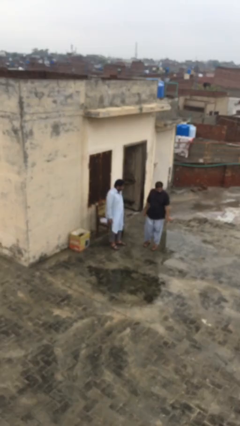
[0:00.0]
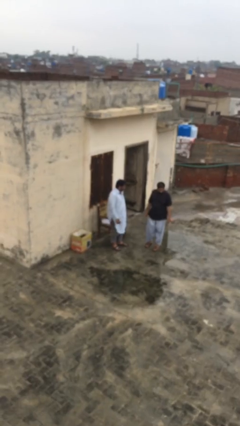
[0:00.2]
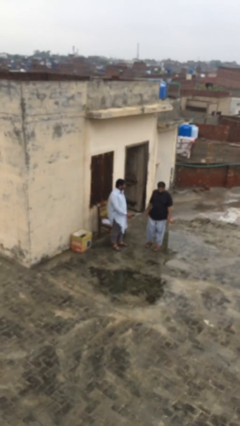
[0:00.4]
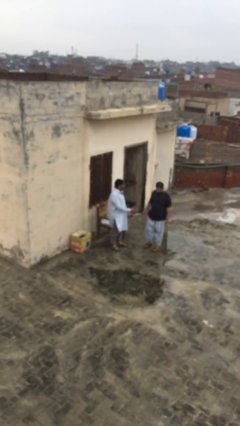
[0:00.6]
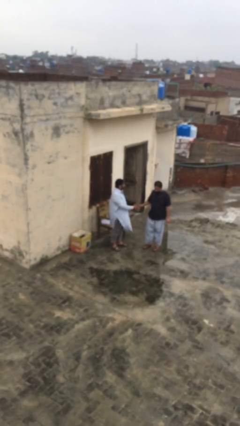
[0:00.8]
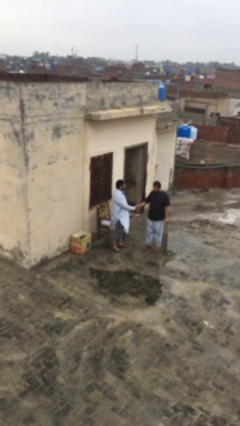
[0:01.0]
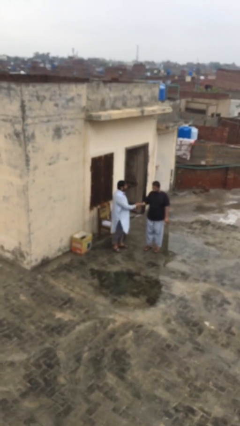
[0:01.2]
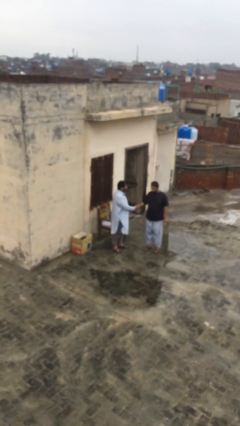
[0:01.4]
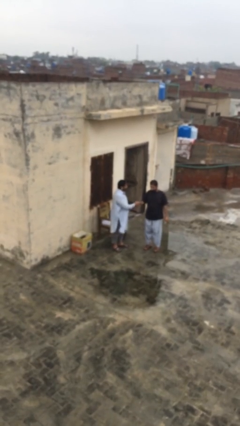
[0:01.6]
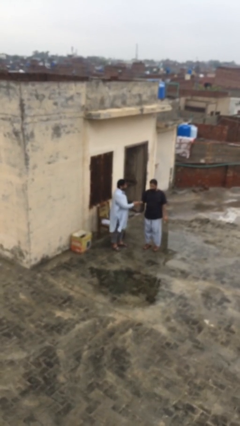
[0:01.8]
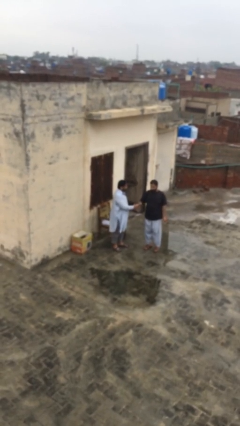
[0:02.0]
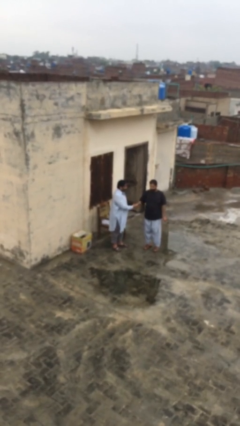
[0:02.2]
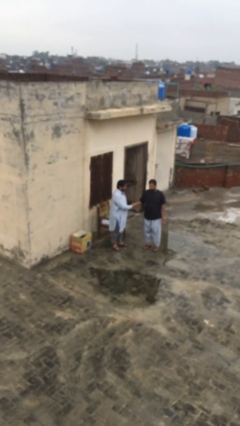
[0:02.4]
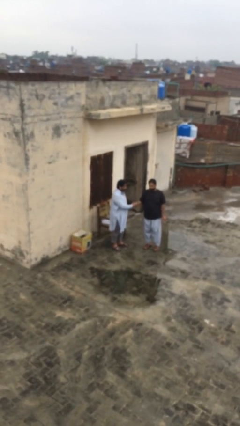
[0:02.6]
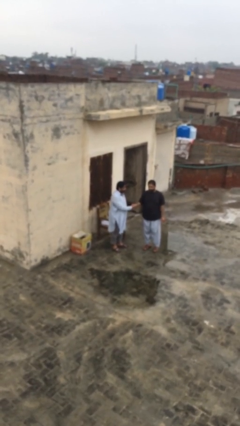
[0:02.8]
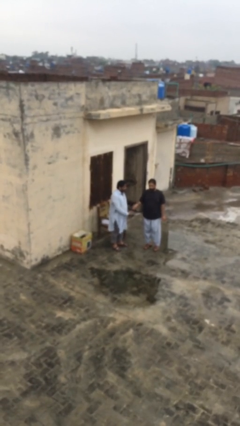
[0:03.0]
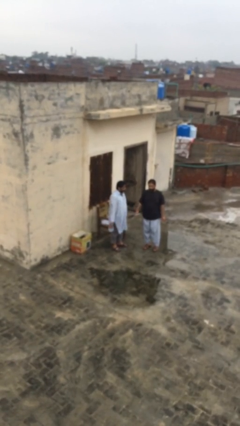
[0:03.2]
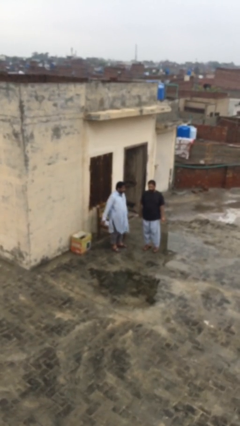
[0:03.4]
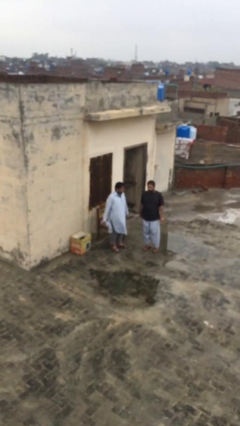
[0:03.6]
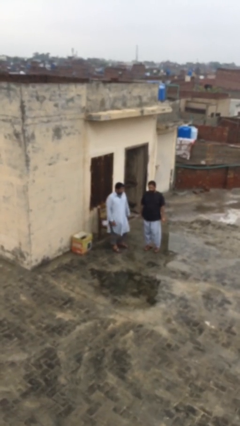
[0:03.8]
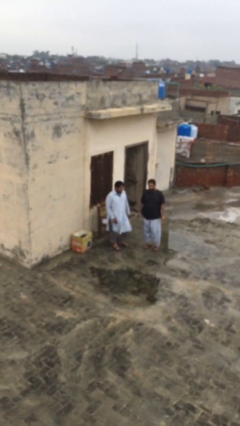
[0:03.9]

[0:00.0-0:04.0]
person shakes hand

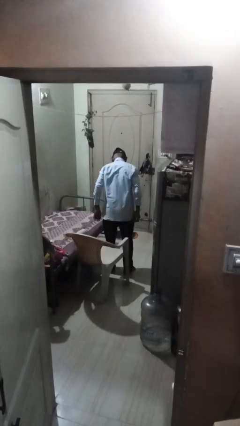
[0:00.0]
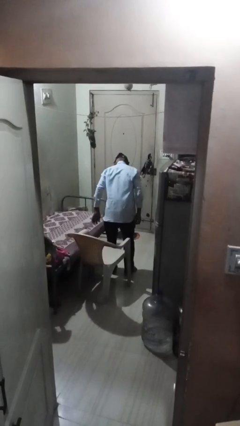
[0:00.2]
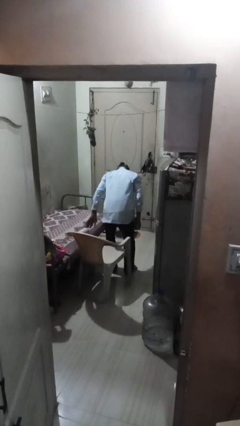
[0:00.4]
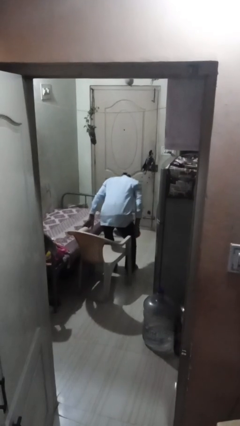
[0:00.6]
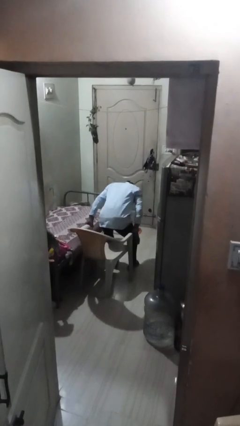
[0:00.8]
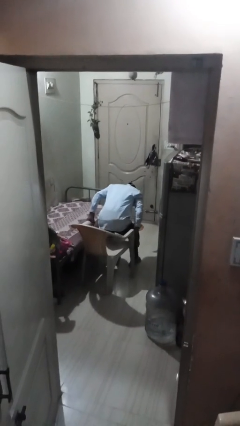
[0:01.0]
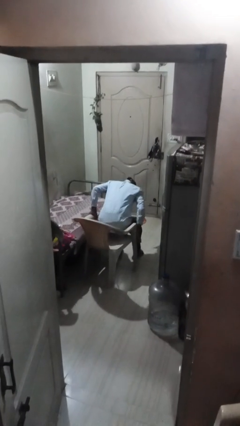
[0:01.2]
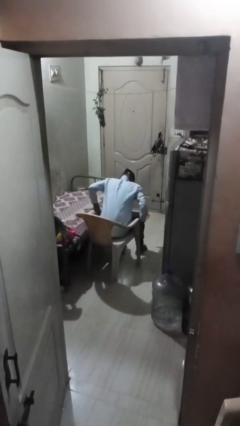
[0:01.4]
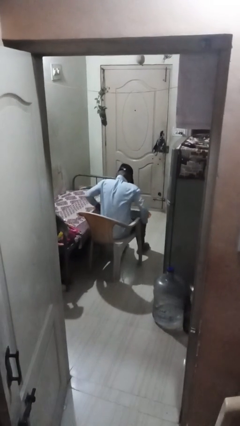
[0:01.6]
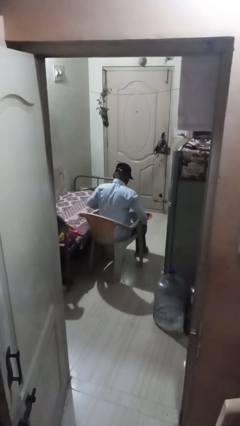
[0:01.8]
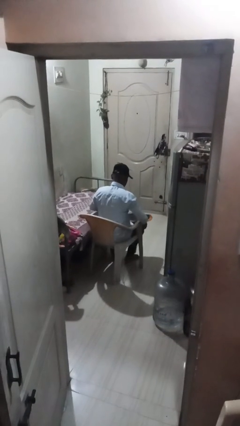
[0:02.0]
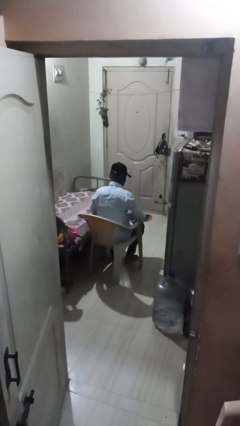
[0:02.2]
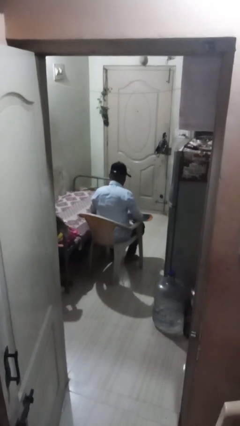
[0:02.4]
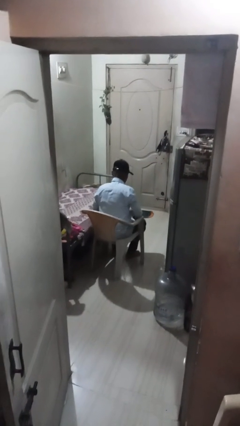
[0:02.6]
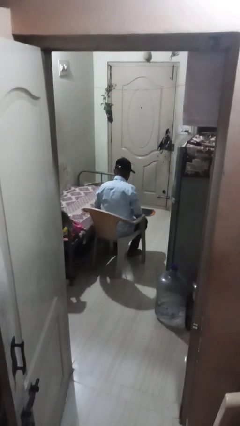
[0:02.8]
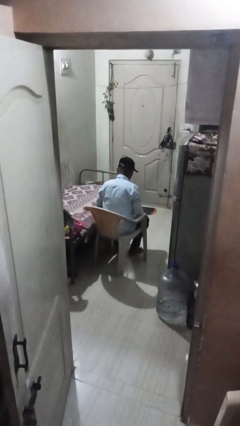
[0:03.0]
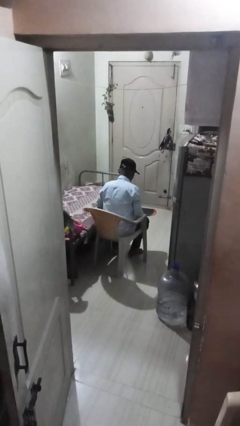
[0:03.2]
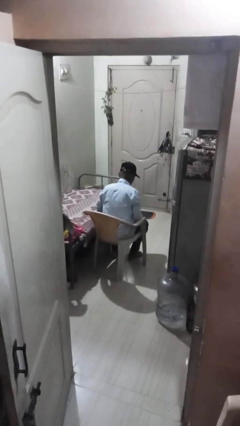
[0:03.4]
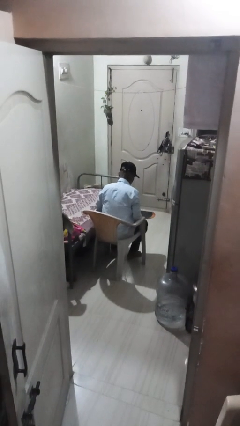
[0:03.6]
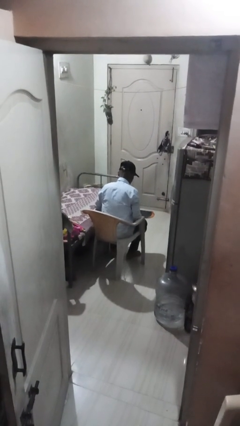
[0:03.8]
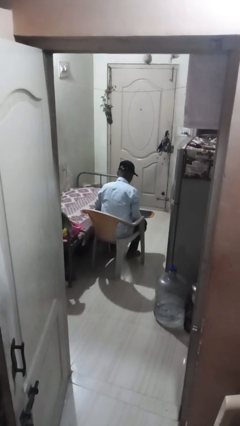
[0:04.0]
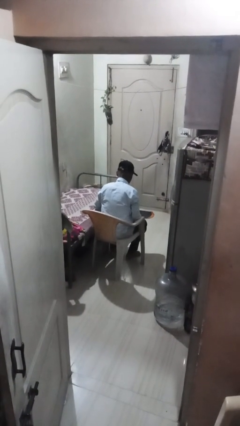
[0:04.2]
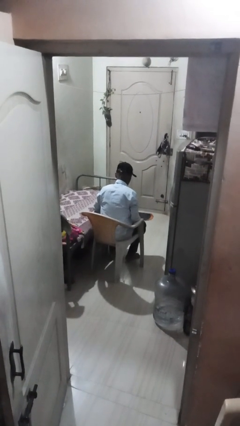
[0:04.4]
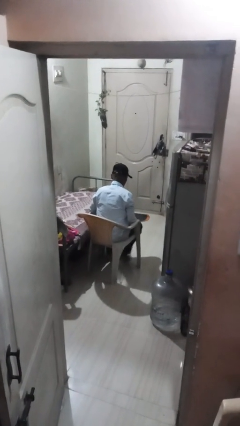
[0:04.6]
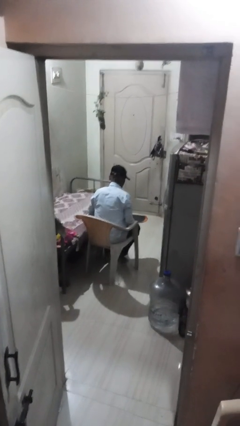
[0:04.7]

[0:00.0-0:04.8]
person sits down

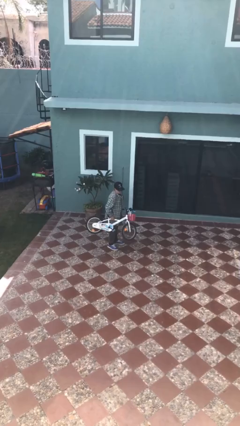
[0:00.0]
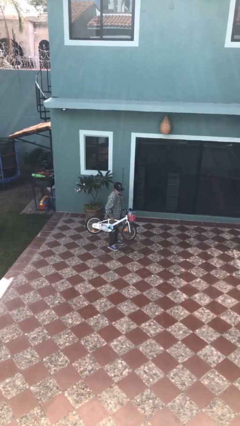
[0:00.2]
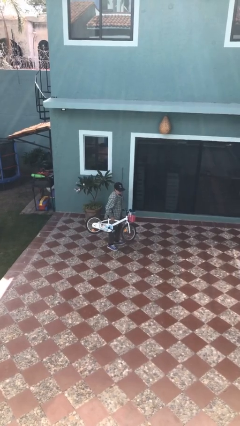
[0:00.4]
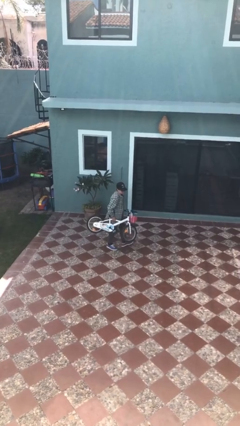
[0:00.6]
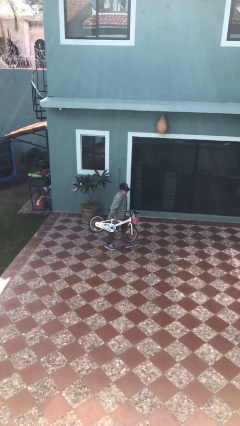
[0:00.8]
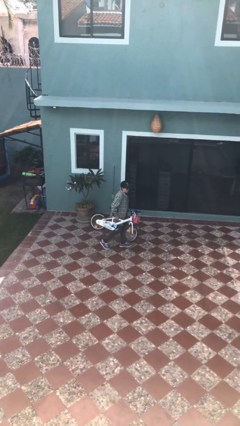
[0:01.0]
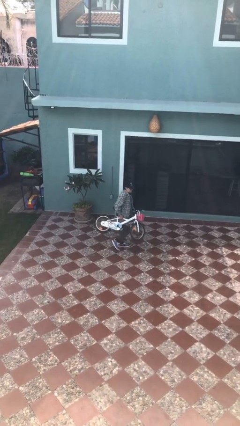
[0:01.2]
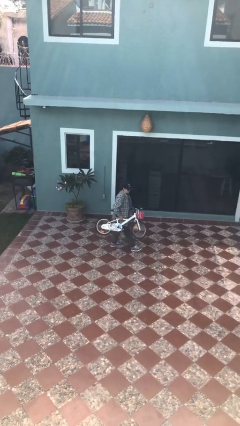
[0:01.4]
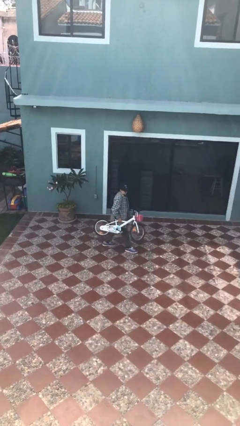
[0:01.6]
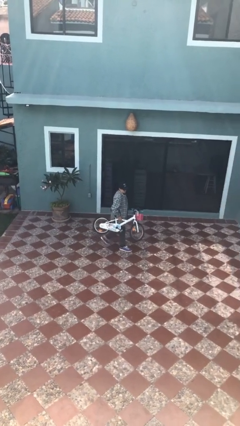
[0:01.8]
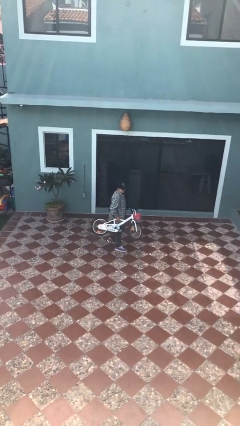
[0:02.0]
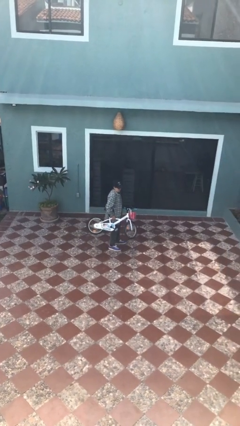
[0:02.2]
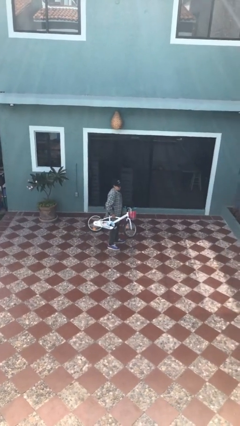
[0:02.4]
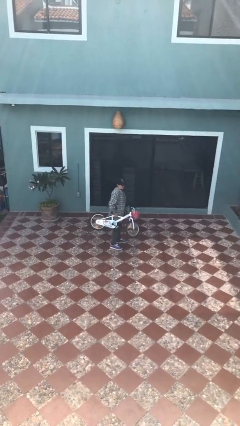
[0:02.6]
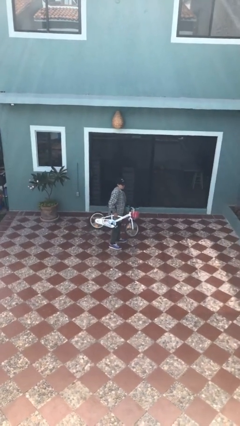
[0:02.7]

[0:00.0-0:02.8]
person carries bicycle

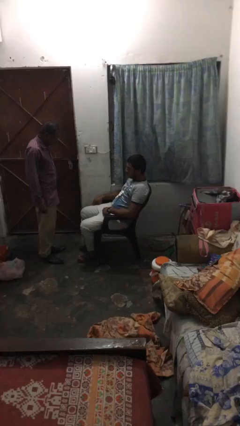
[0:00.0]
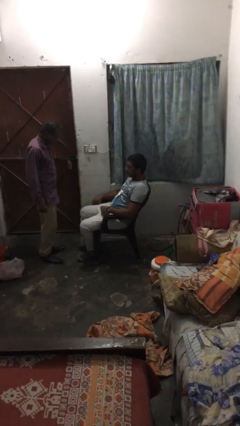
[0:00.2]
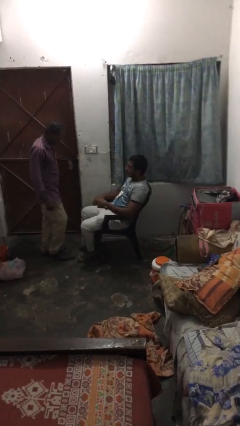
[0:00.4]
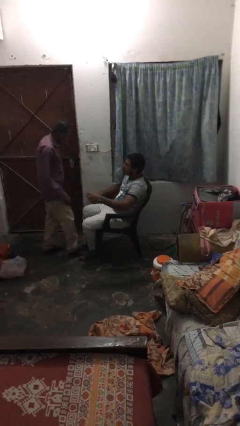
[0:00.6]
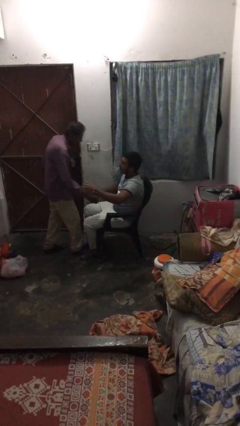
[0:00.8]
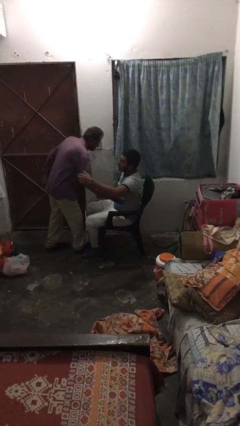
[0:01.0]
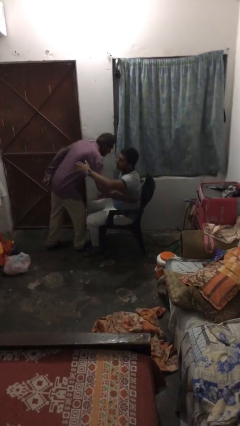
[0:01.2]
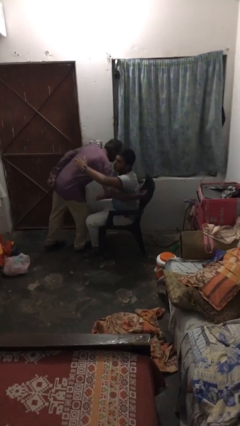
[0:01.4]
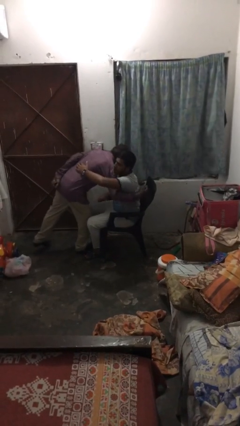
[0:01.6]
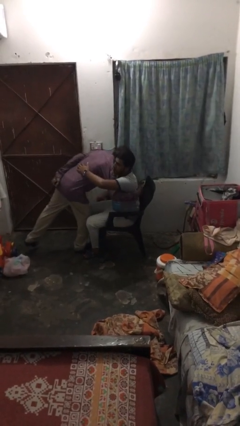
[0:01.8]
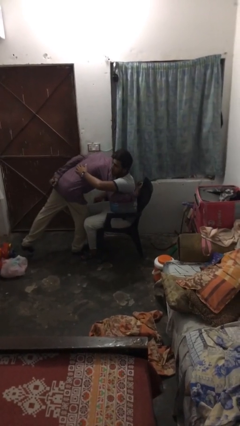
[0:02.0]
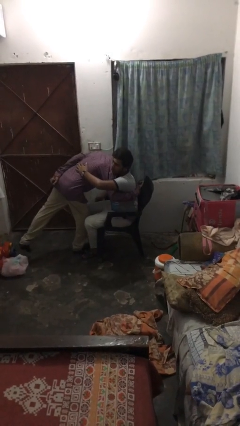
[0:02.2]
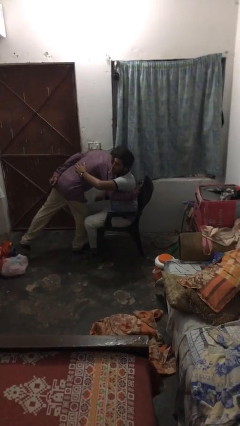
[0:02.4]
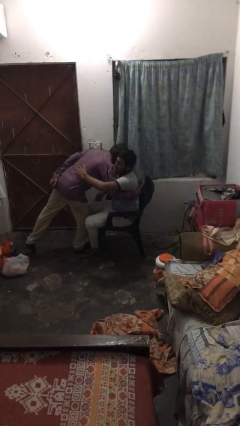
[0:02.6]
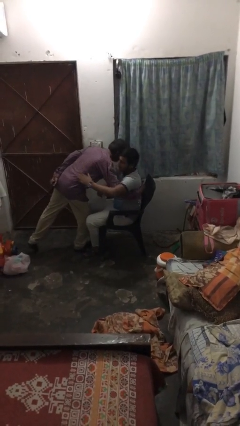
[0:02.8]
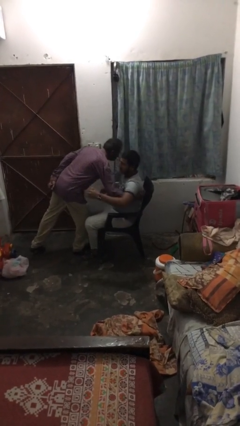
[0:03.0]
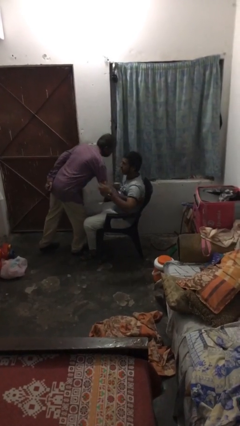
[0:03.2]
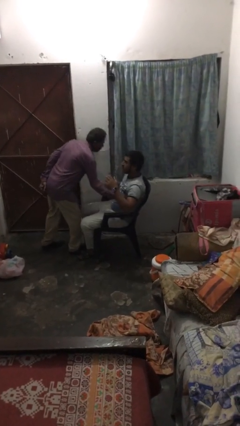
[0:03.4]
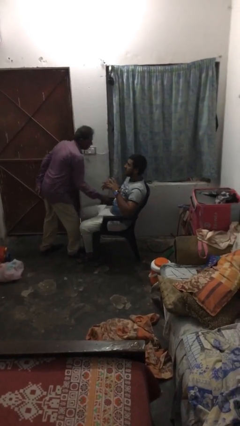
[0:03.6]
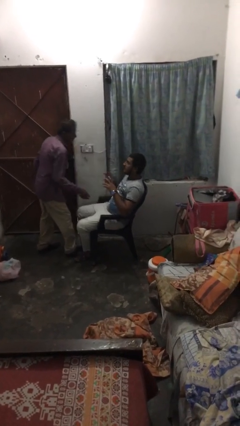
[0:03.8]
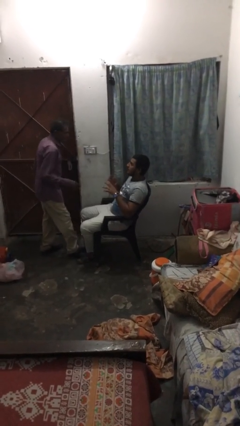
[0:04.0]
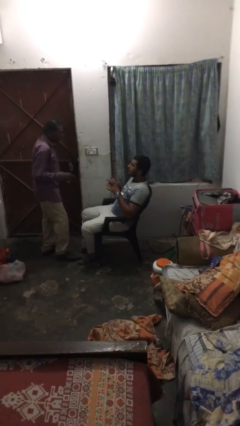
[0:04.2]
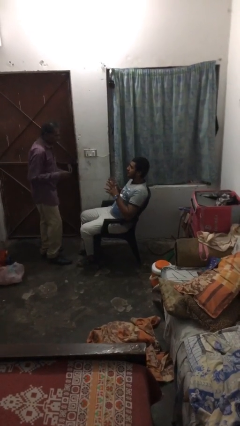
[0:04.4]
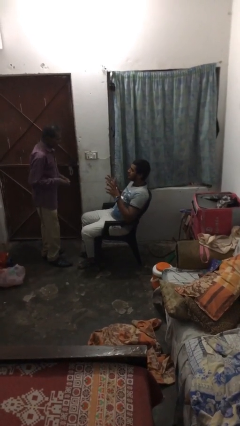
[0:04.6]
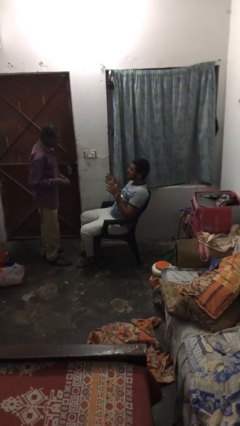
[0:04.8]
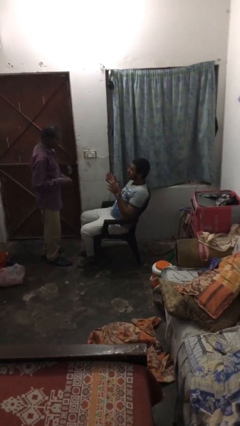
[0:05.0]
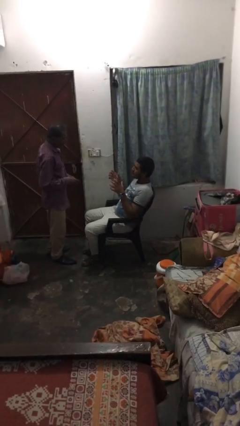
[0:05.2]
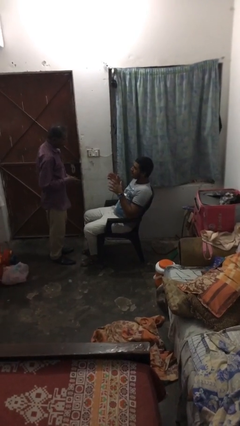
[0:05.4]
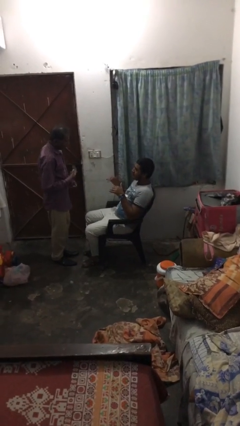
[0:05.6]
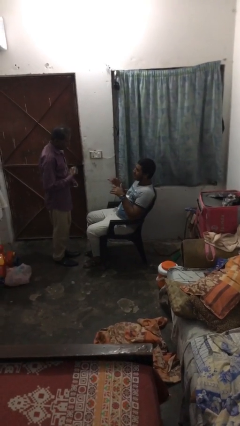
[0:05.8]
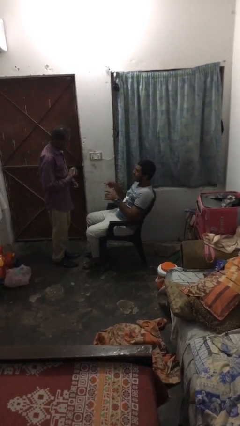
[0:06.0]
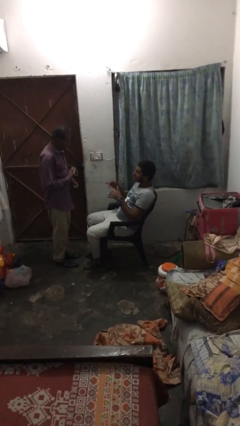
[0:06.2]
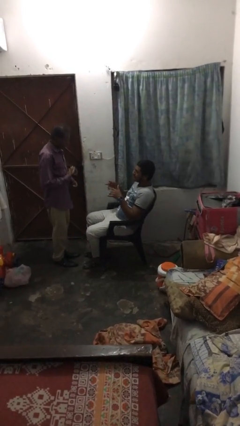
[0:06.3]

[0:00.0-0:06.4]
person embraces person
